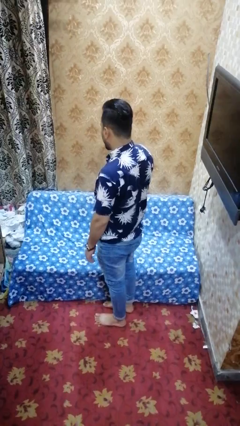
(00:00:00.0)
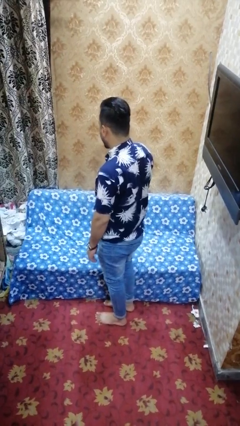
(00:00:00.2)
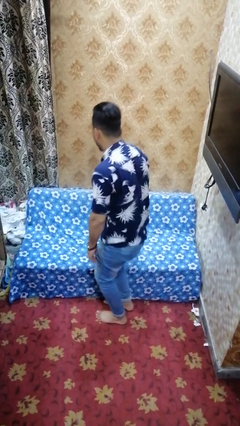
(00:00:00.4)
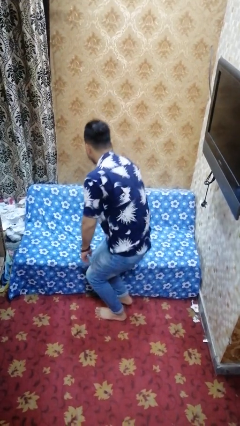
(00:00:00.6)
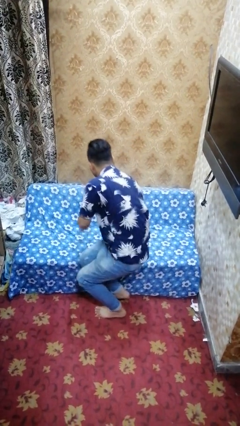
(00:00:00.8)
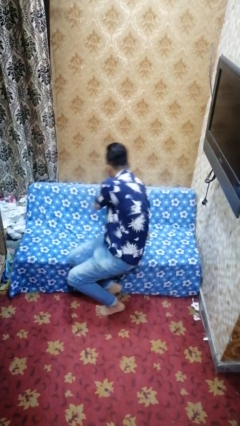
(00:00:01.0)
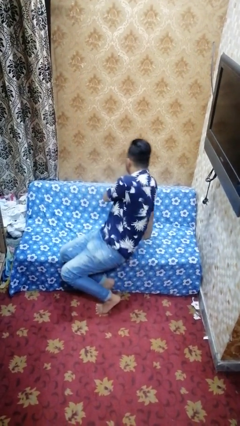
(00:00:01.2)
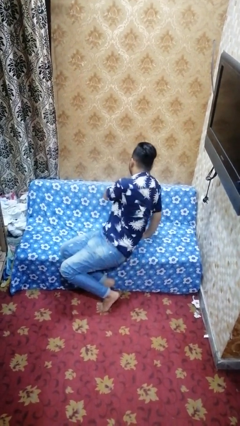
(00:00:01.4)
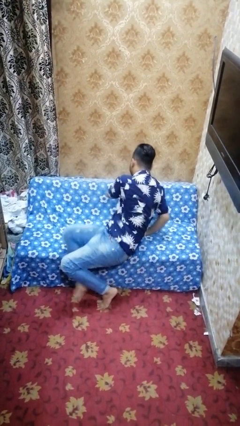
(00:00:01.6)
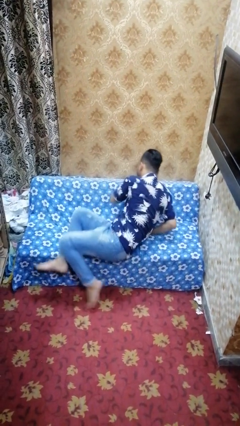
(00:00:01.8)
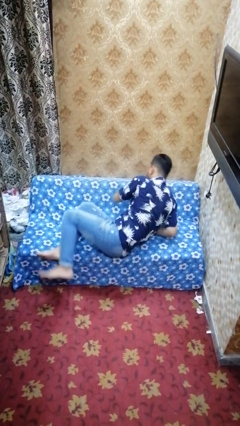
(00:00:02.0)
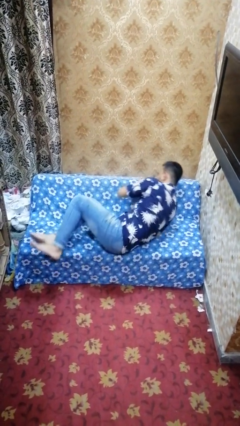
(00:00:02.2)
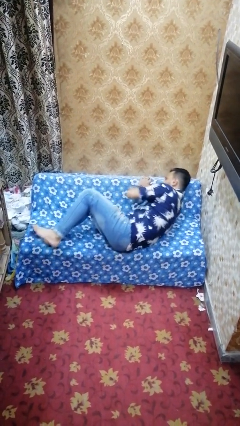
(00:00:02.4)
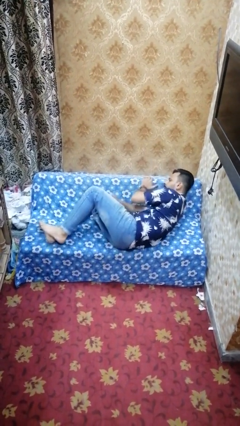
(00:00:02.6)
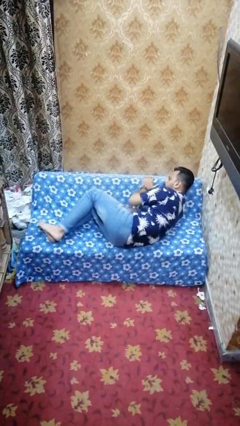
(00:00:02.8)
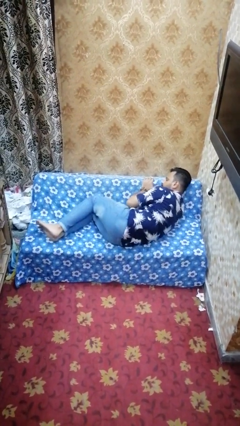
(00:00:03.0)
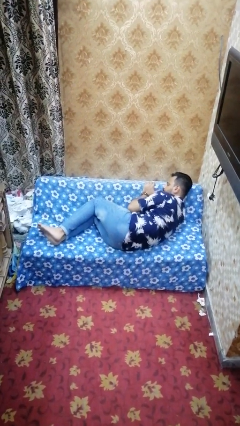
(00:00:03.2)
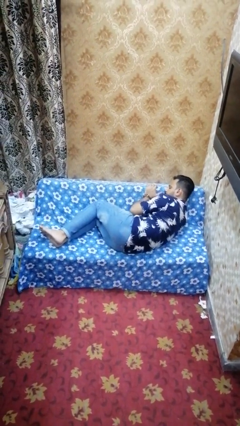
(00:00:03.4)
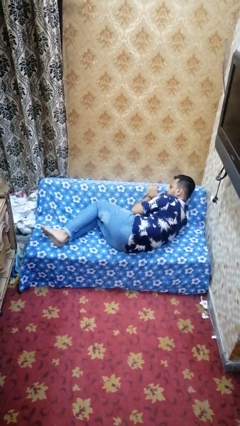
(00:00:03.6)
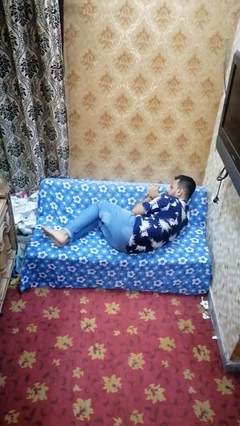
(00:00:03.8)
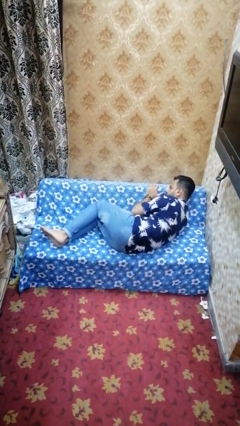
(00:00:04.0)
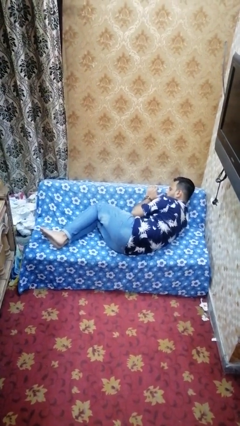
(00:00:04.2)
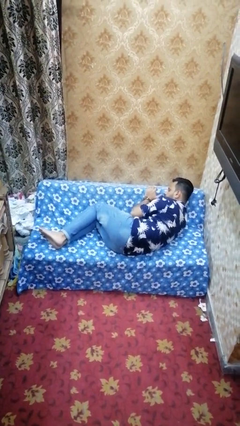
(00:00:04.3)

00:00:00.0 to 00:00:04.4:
person lies down on couch

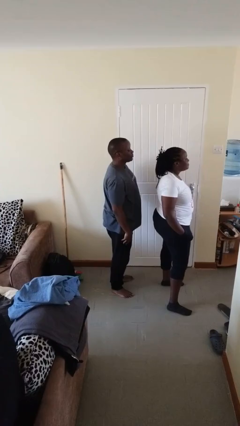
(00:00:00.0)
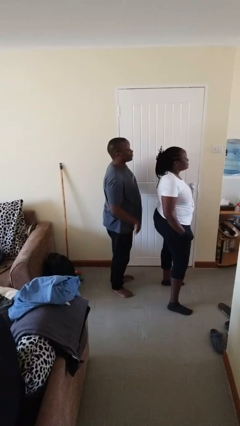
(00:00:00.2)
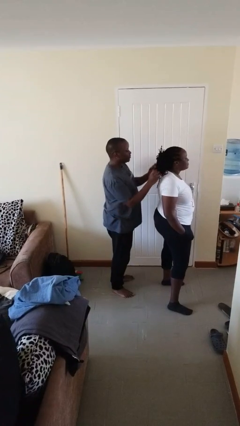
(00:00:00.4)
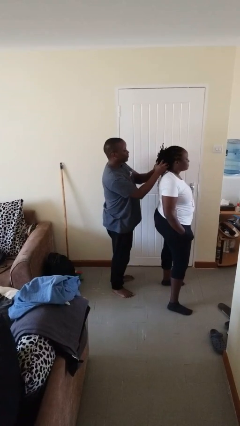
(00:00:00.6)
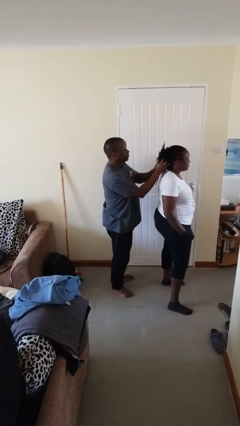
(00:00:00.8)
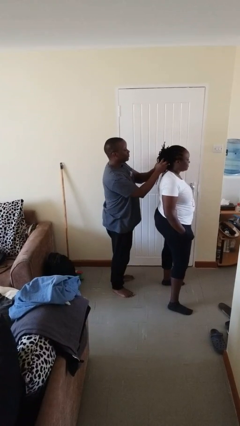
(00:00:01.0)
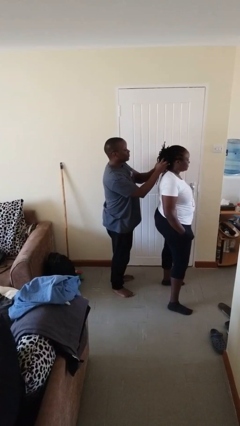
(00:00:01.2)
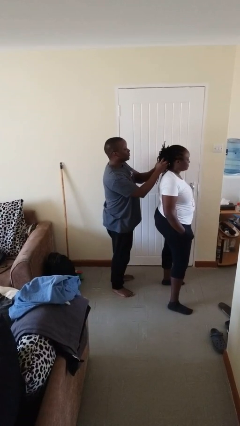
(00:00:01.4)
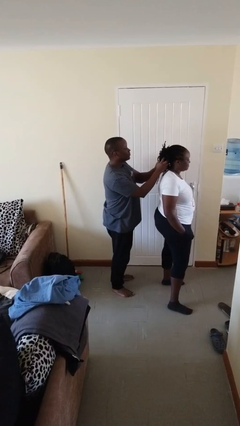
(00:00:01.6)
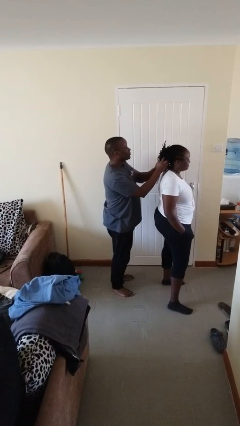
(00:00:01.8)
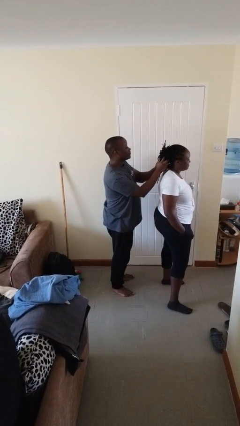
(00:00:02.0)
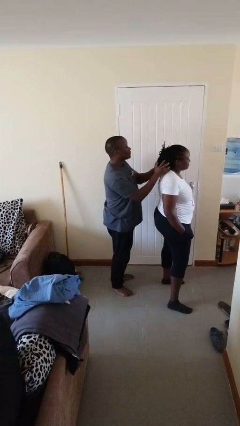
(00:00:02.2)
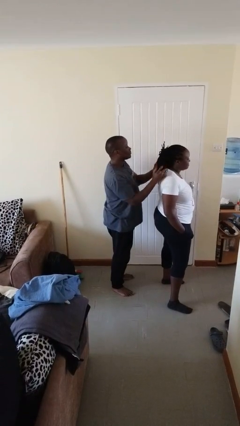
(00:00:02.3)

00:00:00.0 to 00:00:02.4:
person grabs person by hair

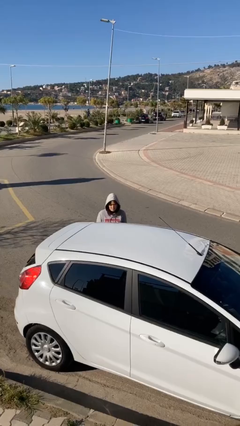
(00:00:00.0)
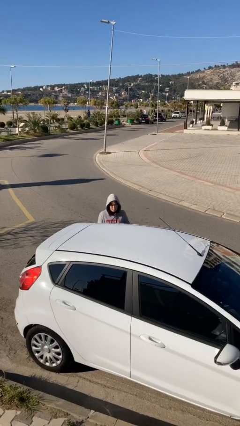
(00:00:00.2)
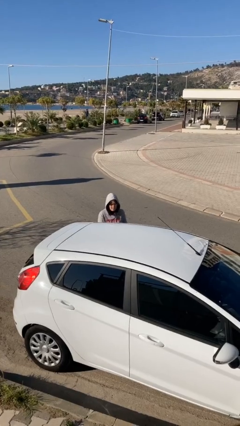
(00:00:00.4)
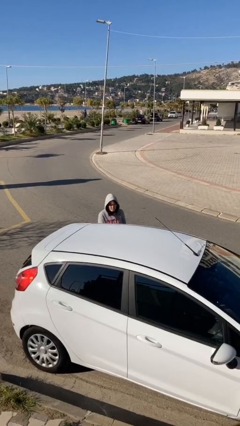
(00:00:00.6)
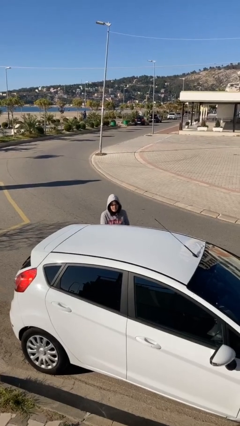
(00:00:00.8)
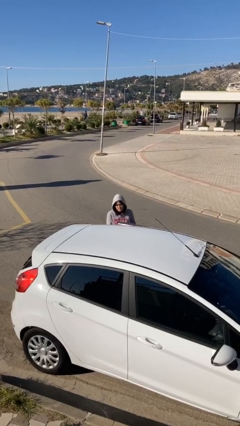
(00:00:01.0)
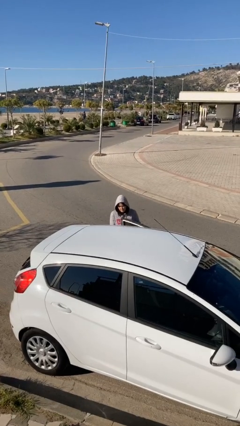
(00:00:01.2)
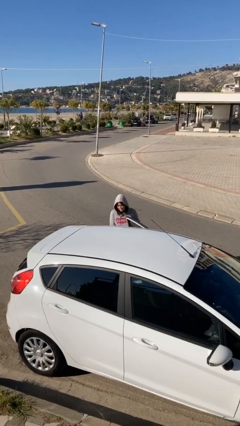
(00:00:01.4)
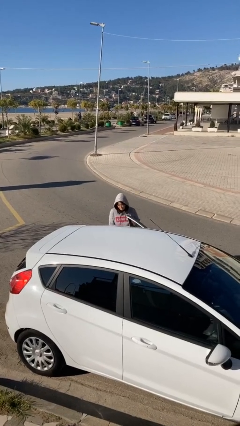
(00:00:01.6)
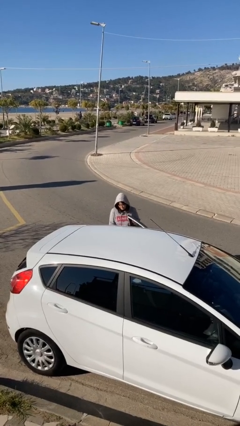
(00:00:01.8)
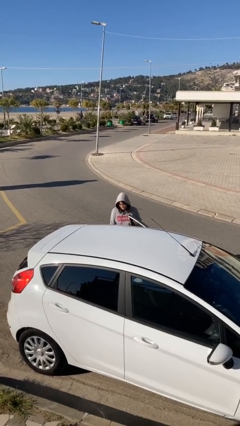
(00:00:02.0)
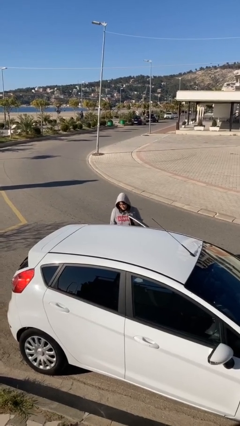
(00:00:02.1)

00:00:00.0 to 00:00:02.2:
person opens car door

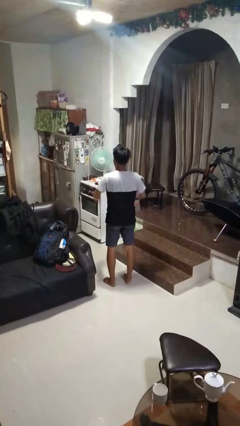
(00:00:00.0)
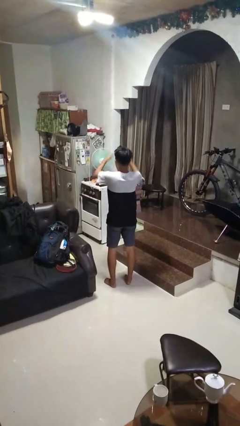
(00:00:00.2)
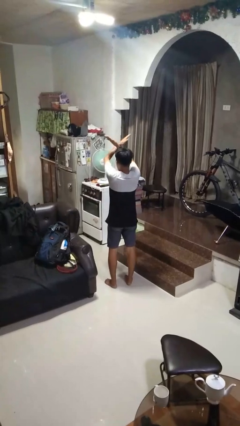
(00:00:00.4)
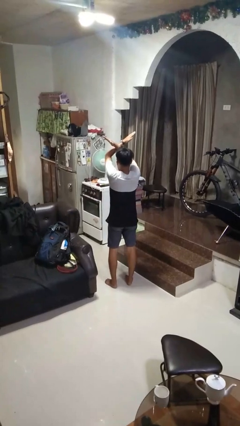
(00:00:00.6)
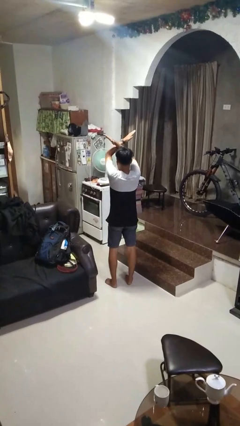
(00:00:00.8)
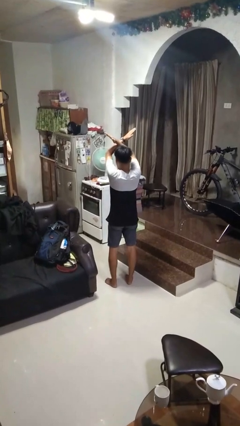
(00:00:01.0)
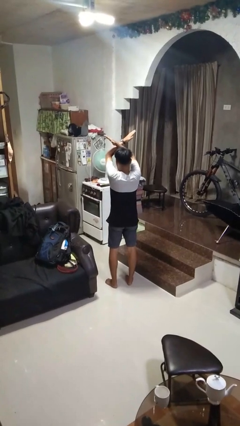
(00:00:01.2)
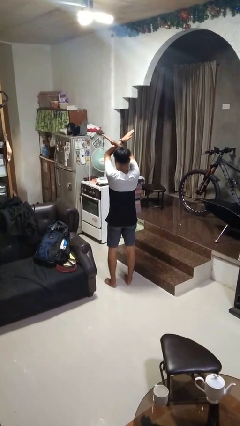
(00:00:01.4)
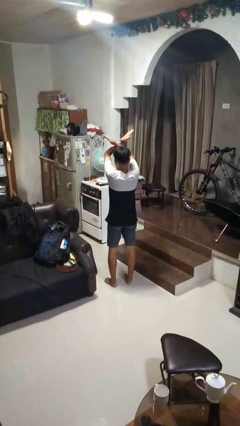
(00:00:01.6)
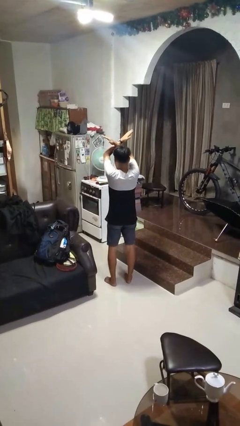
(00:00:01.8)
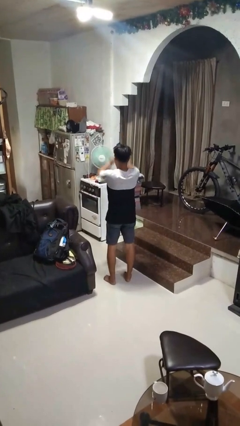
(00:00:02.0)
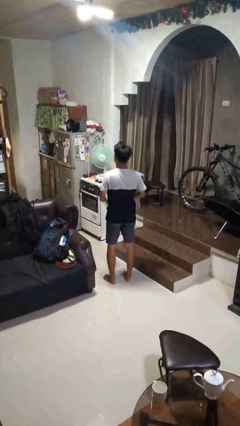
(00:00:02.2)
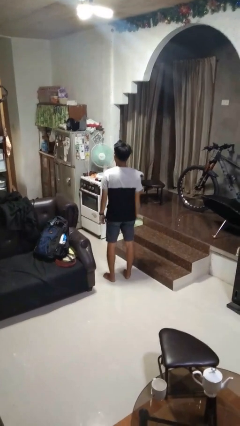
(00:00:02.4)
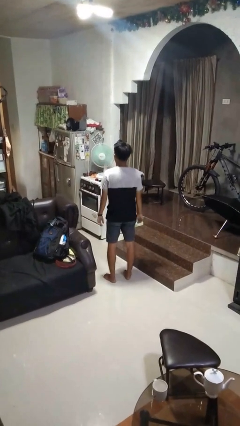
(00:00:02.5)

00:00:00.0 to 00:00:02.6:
person gestures arms x

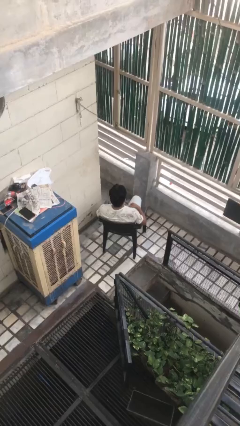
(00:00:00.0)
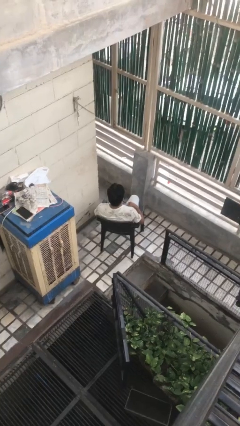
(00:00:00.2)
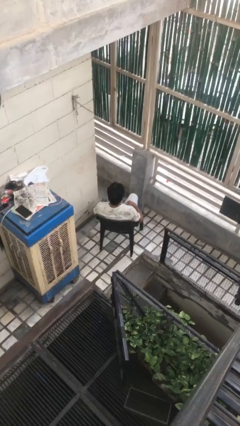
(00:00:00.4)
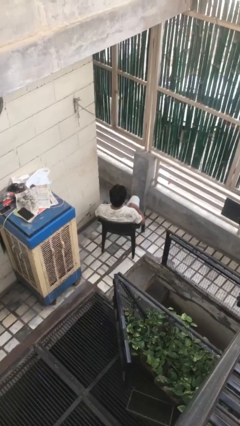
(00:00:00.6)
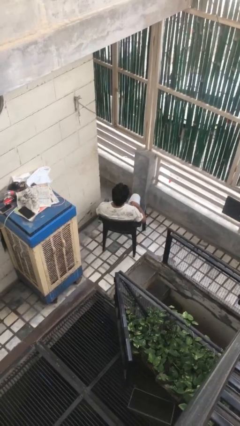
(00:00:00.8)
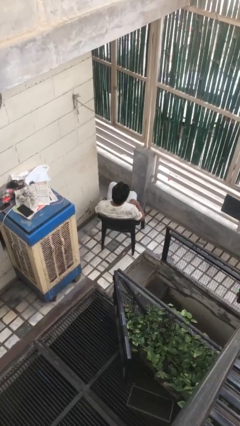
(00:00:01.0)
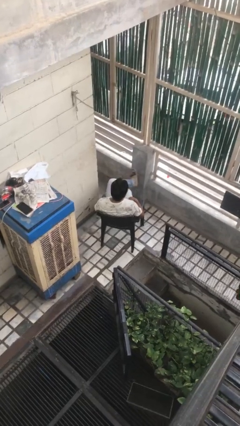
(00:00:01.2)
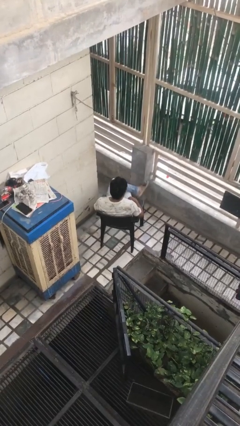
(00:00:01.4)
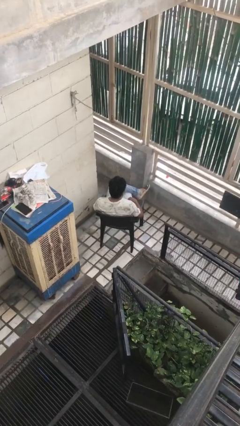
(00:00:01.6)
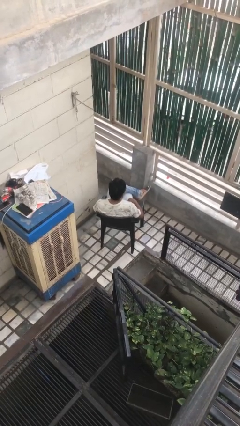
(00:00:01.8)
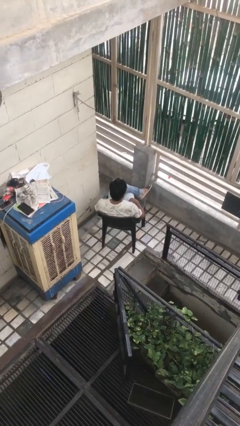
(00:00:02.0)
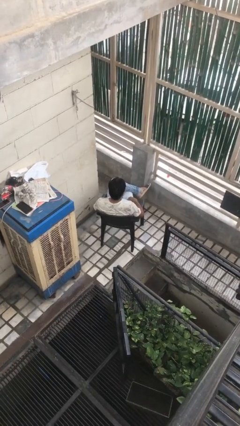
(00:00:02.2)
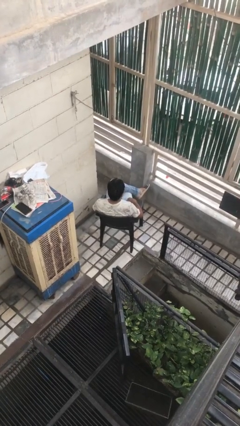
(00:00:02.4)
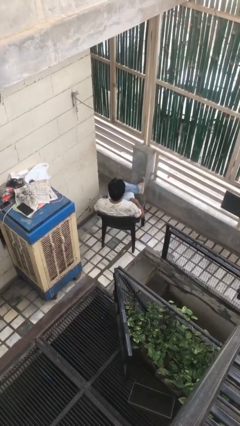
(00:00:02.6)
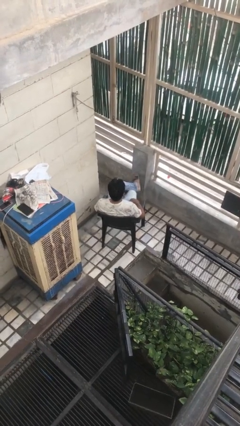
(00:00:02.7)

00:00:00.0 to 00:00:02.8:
person crosses legs

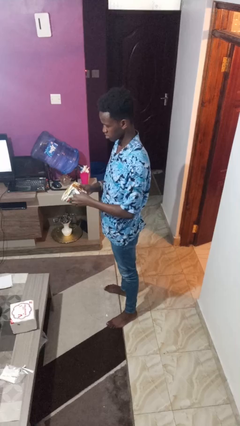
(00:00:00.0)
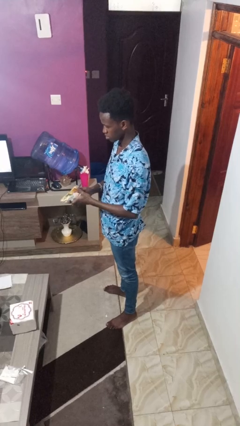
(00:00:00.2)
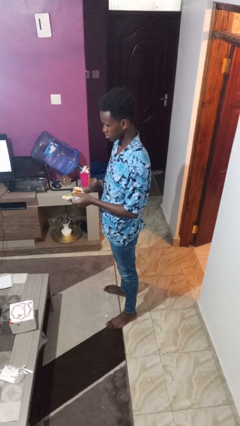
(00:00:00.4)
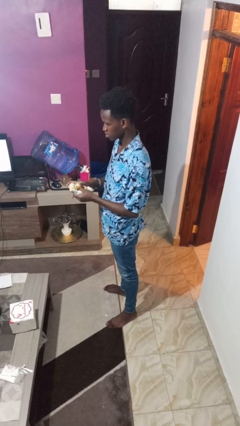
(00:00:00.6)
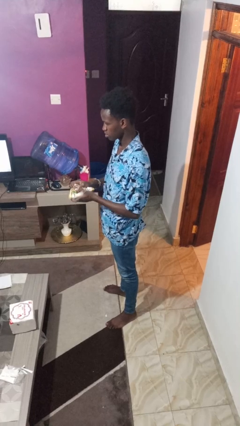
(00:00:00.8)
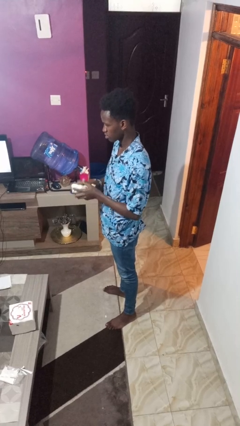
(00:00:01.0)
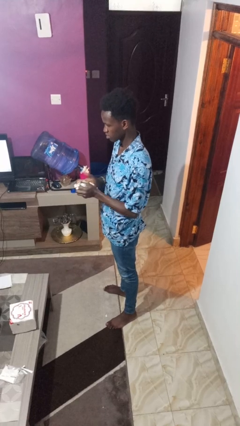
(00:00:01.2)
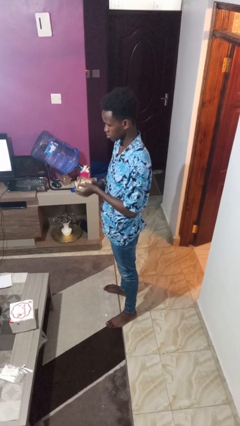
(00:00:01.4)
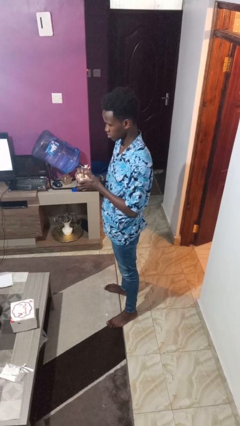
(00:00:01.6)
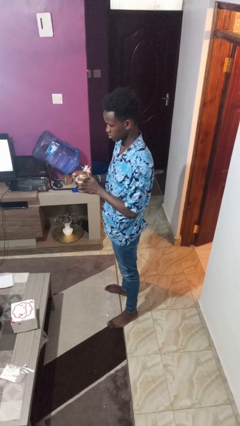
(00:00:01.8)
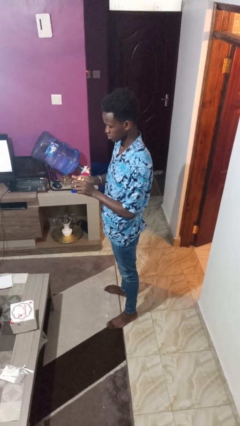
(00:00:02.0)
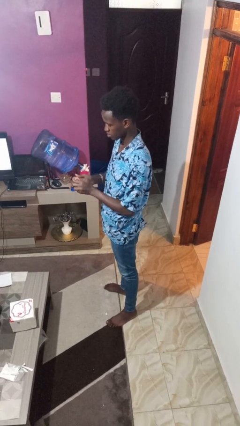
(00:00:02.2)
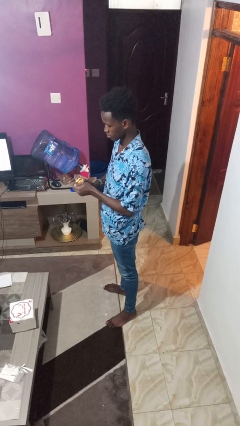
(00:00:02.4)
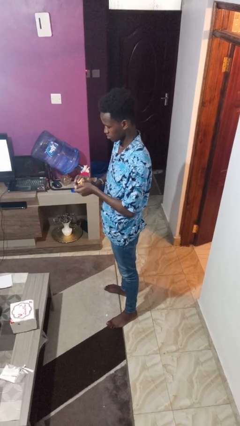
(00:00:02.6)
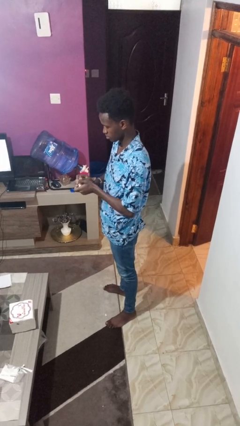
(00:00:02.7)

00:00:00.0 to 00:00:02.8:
person crumples paper
